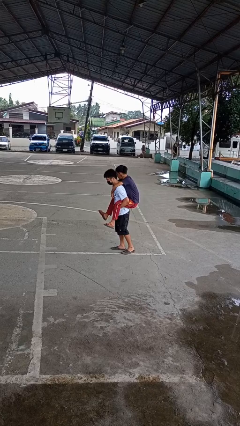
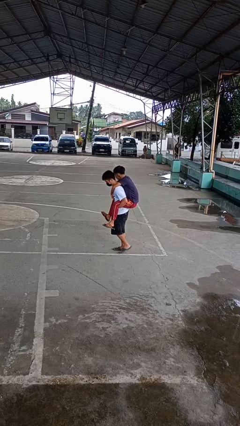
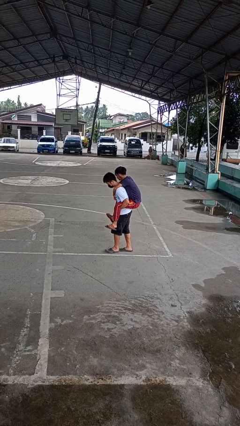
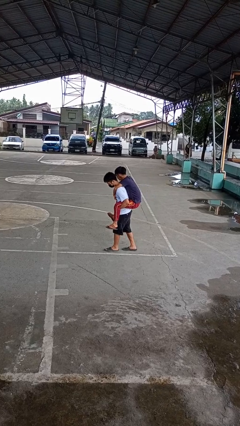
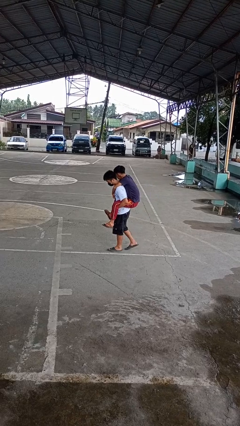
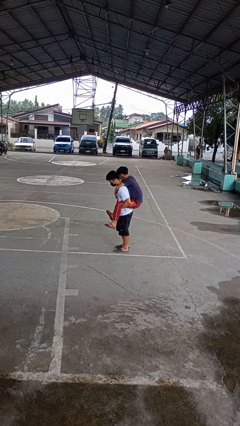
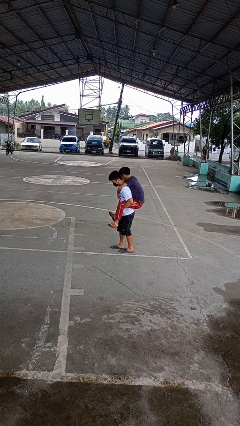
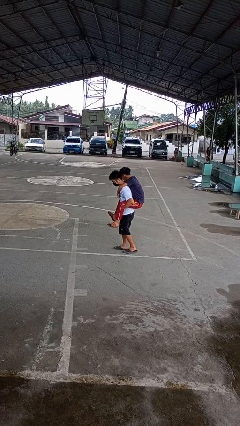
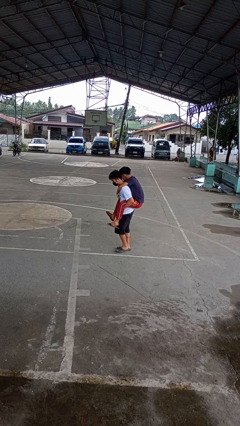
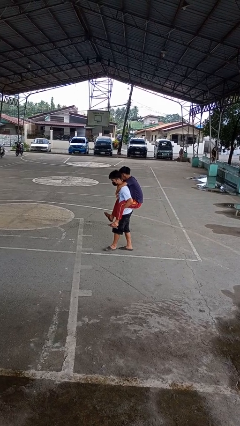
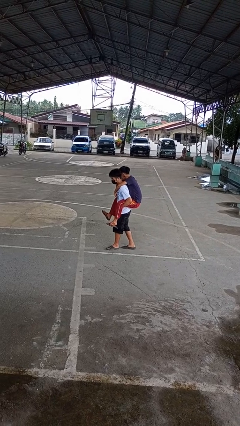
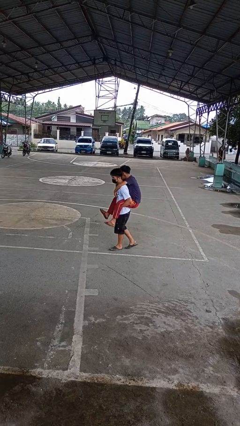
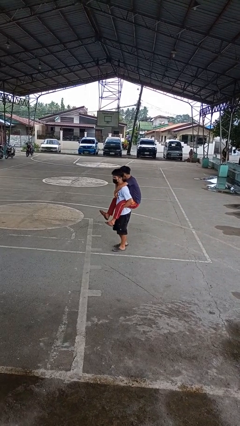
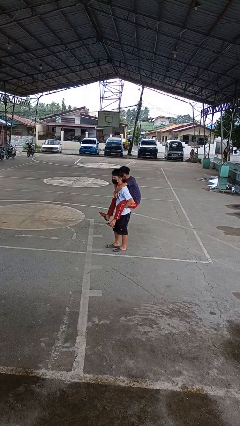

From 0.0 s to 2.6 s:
person carries person on back

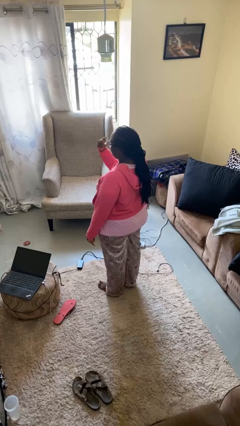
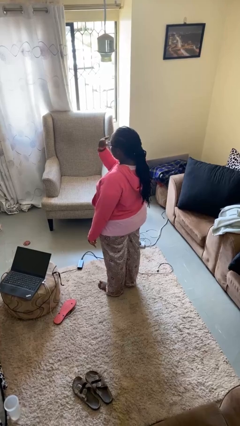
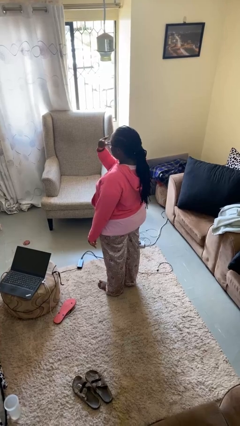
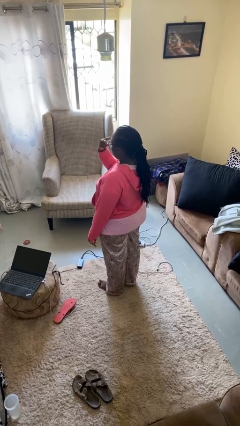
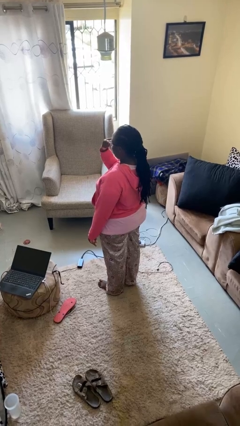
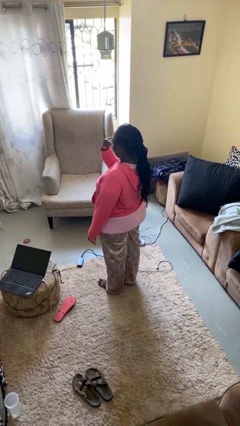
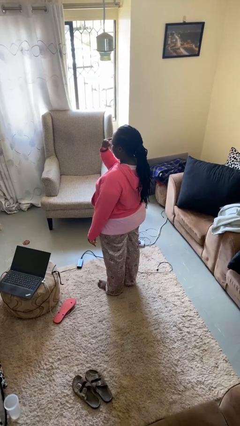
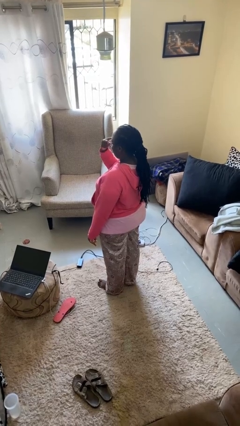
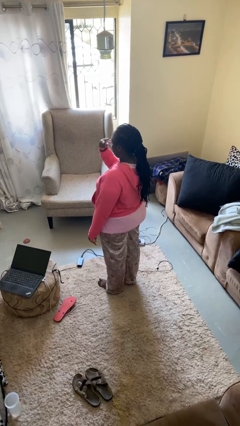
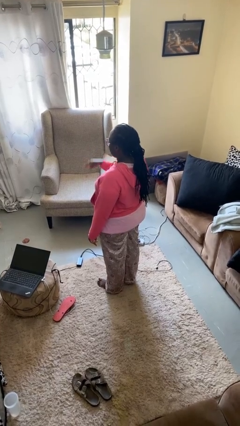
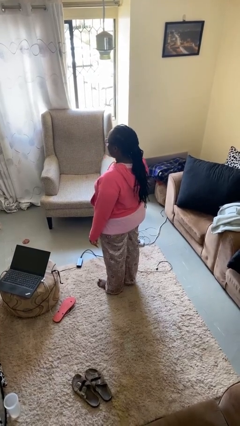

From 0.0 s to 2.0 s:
person gestures watch closely

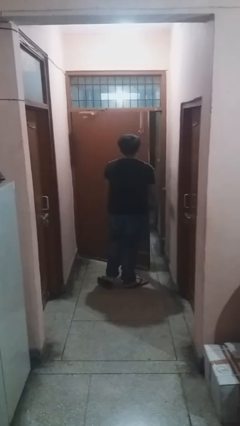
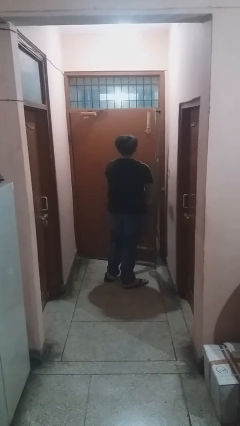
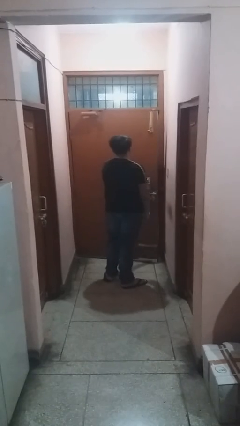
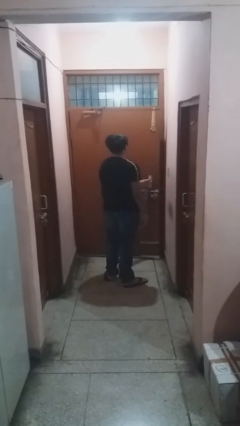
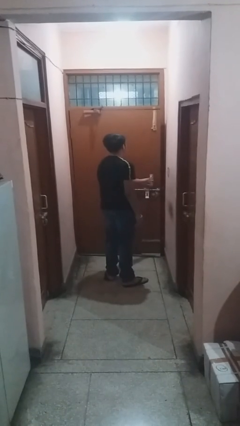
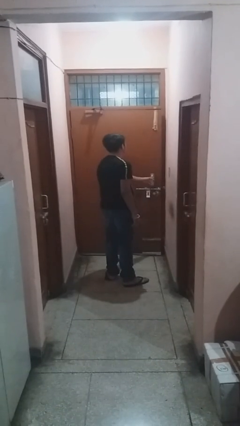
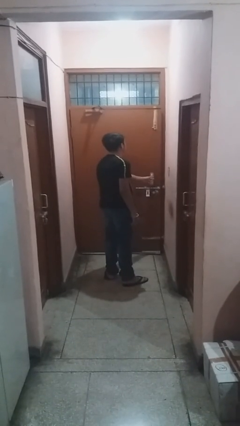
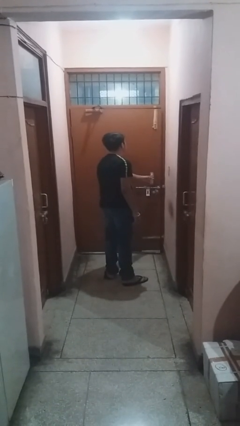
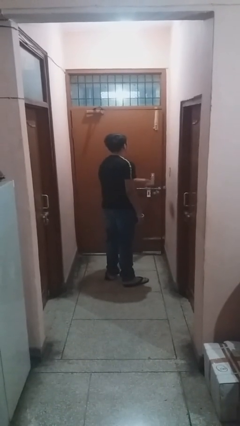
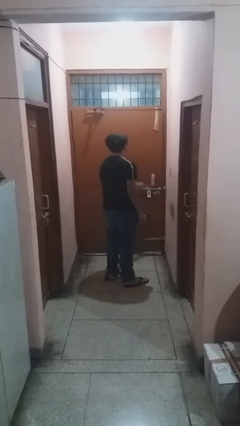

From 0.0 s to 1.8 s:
person closes facility door

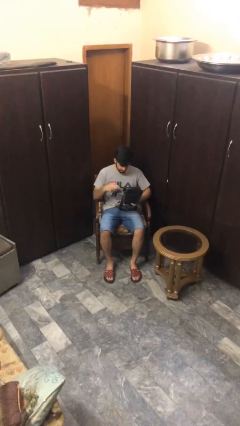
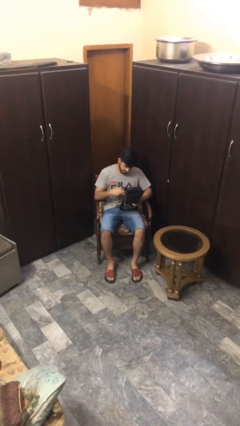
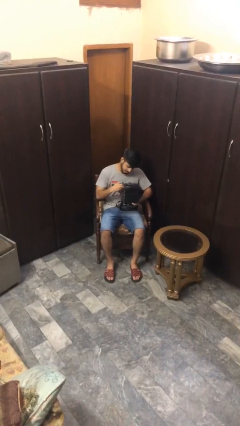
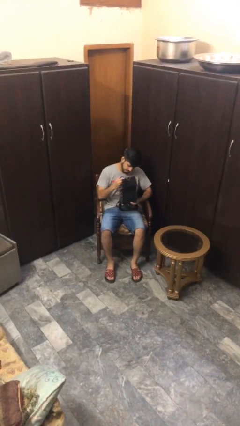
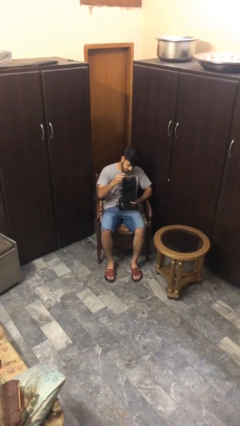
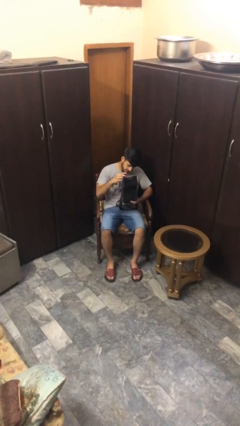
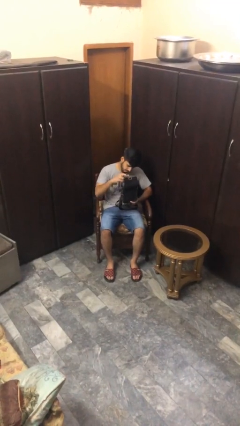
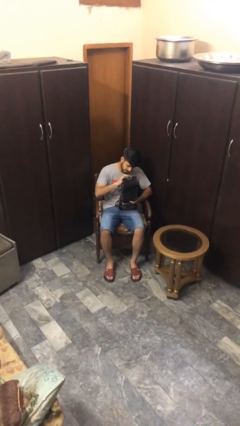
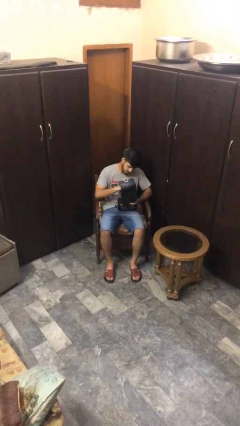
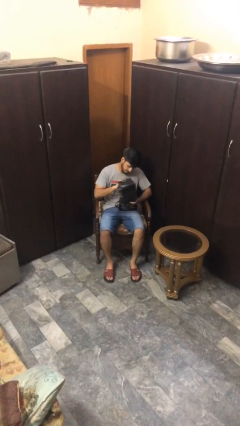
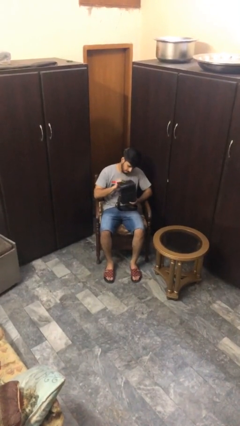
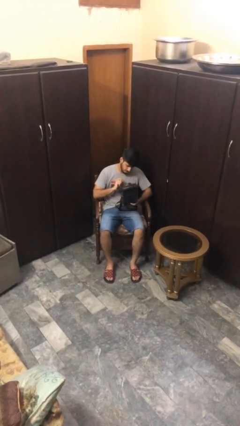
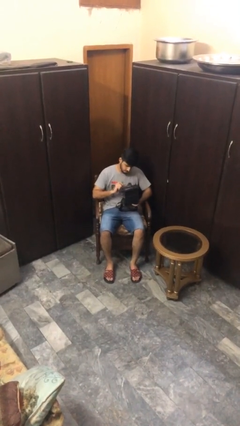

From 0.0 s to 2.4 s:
person puts object into purse

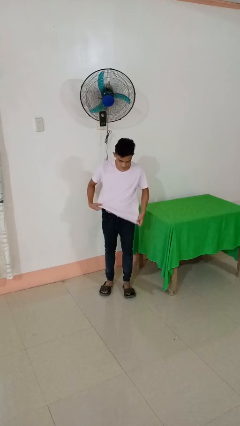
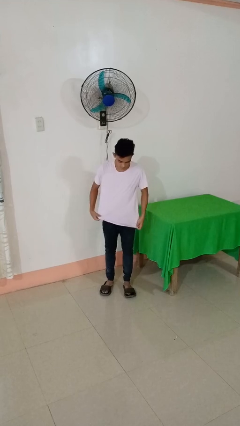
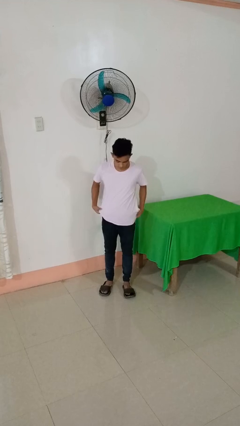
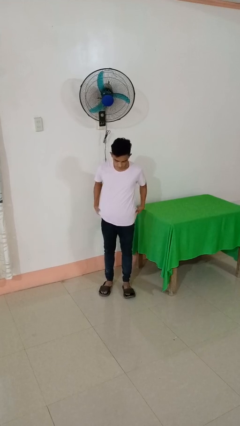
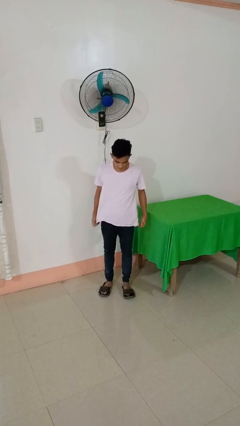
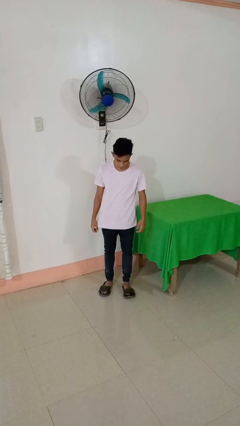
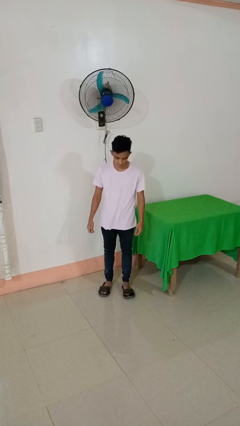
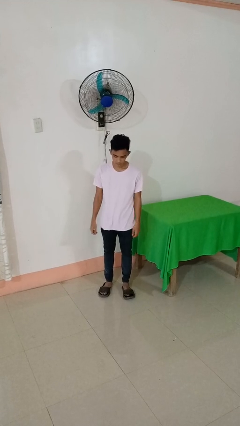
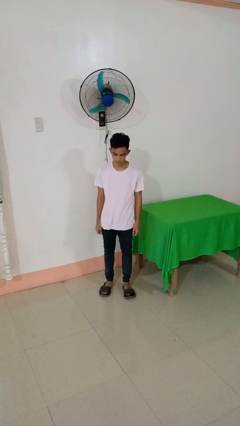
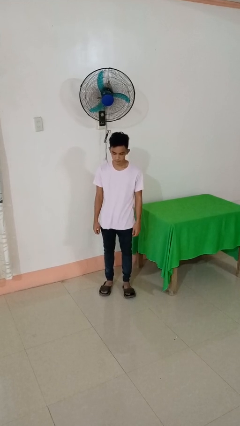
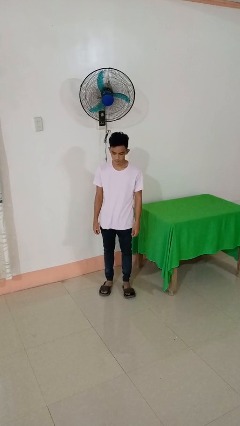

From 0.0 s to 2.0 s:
person untucks shirt

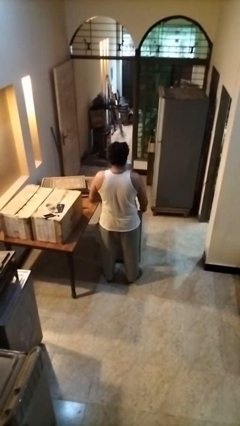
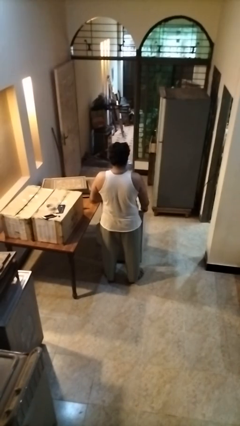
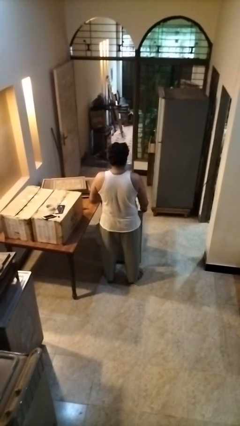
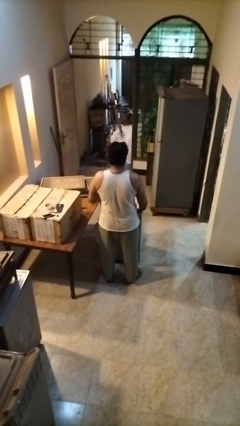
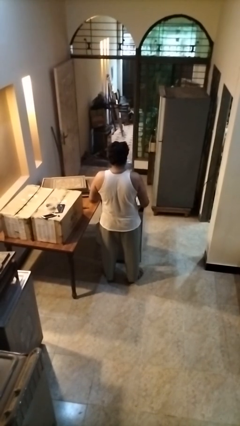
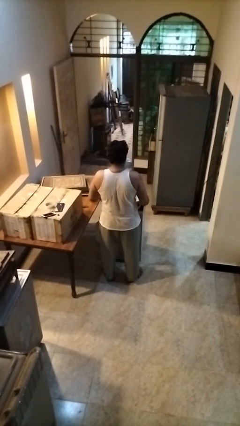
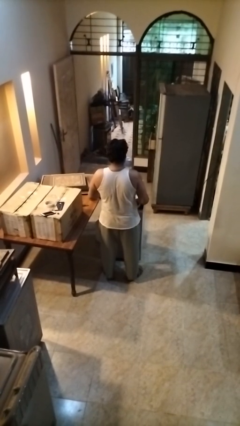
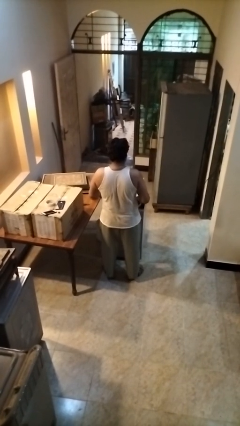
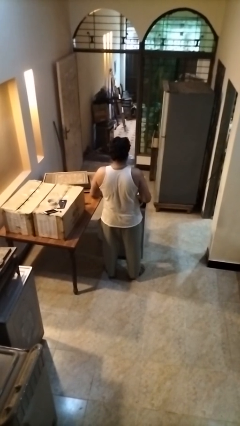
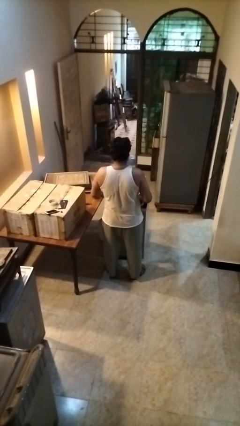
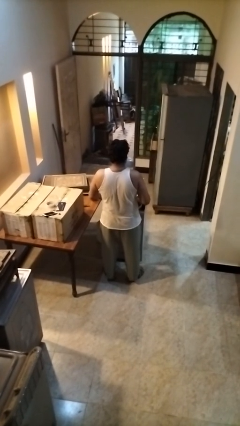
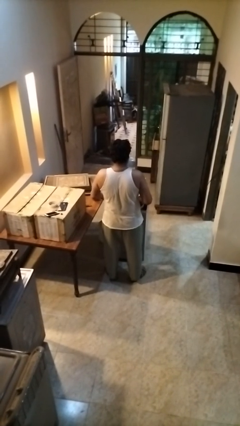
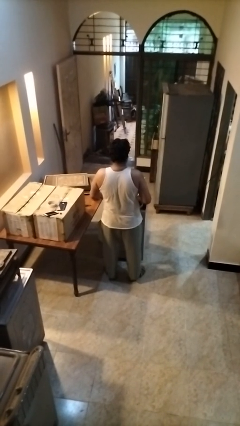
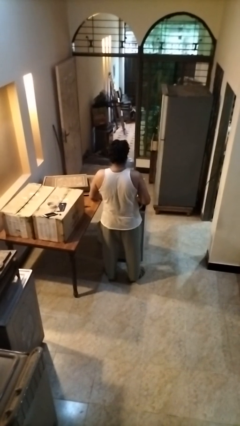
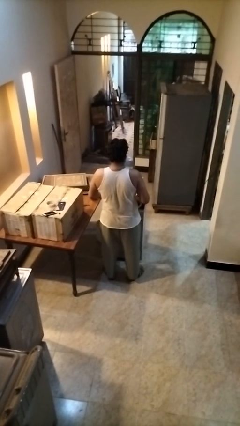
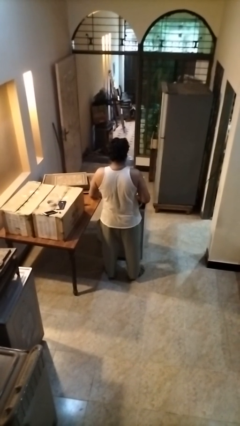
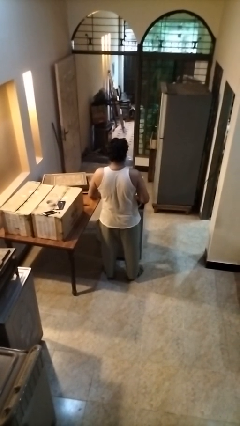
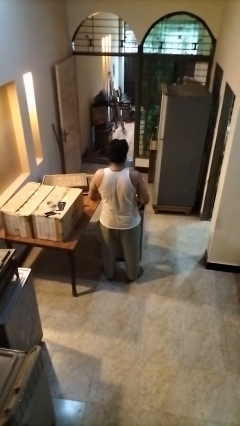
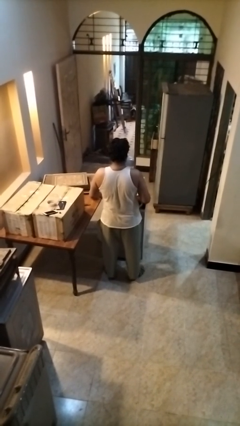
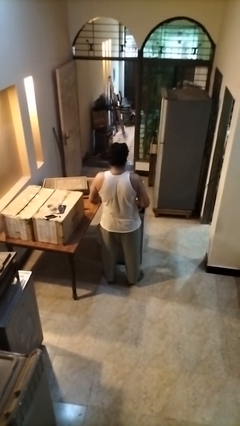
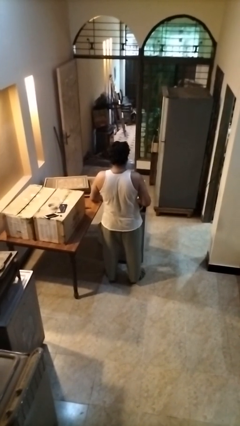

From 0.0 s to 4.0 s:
person opens clothes washer

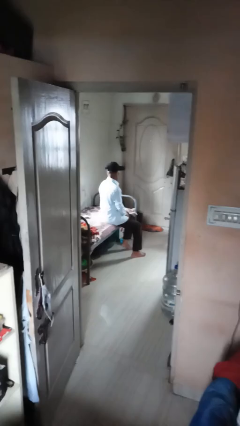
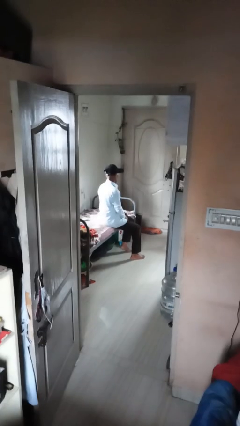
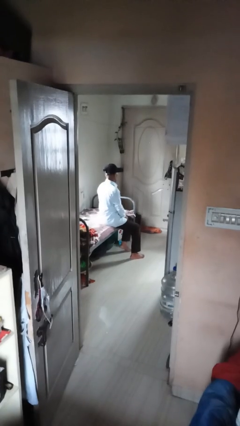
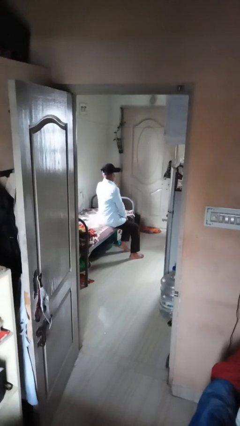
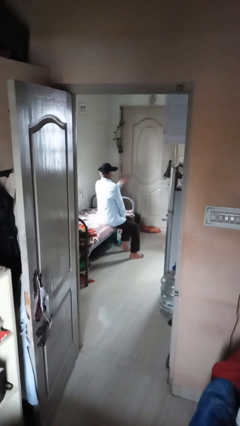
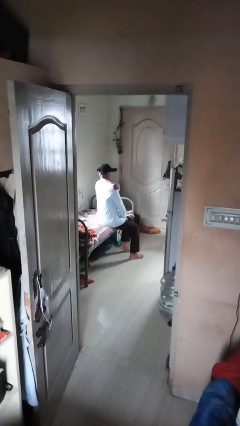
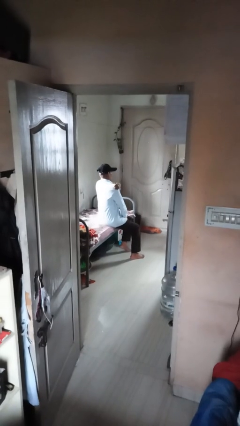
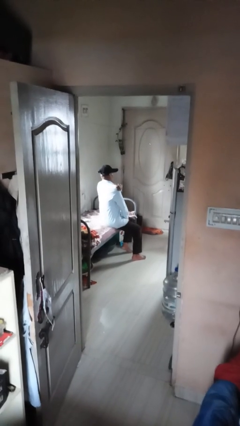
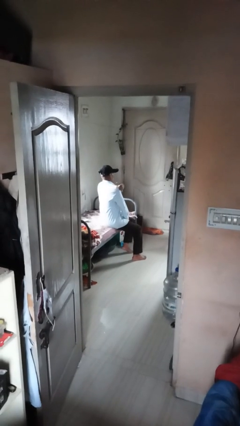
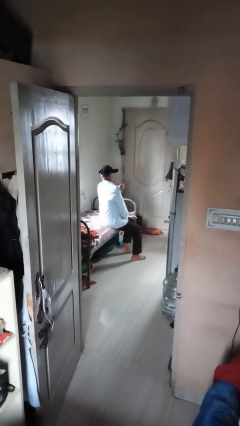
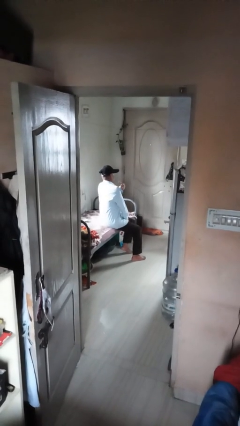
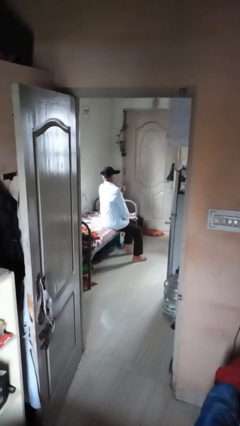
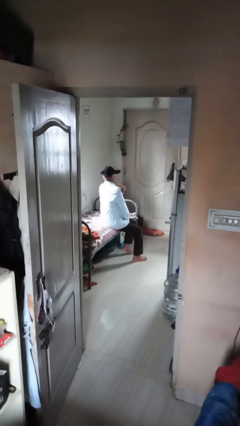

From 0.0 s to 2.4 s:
person swats bug
